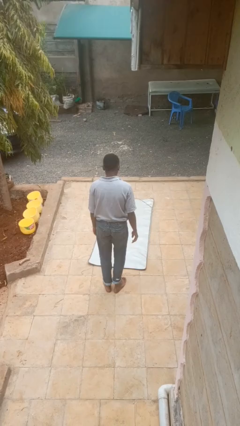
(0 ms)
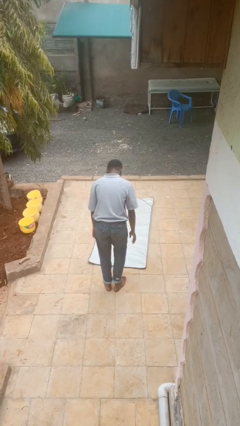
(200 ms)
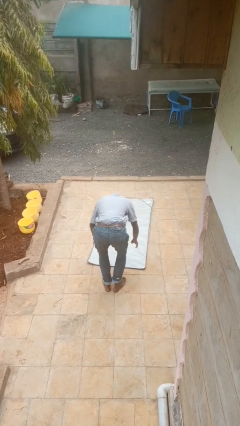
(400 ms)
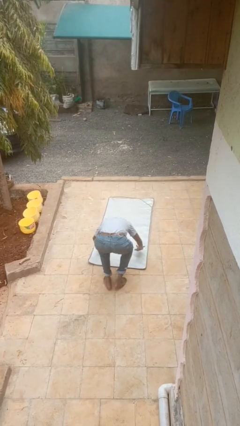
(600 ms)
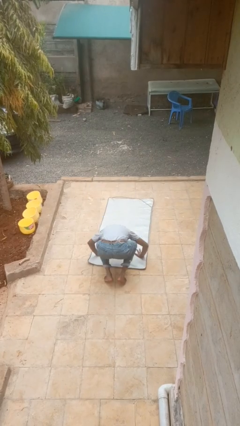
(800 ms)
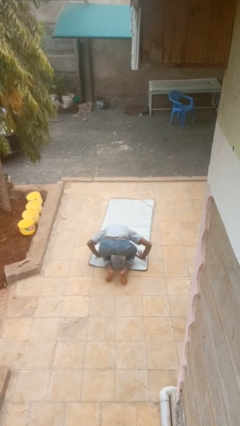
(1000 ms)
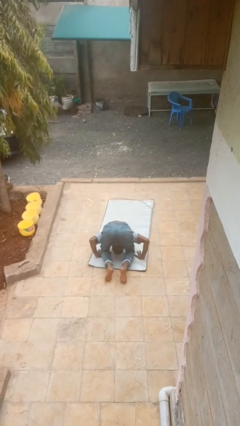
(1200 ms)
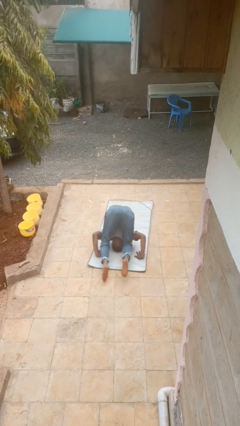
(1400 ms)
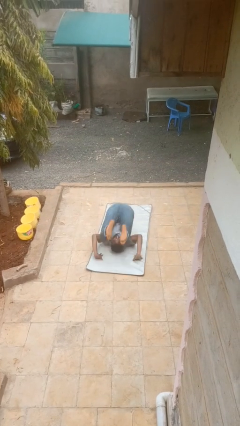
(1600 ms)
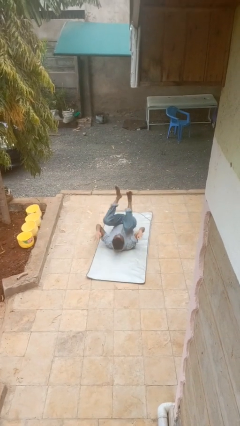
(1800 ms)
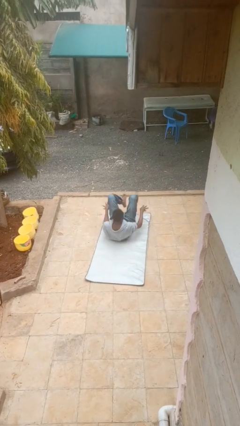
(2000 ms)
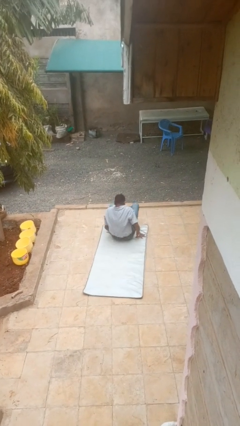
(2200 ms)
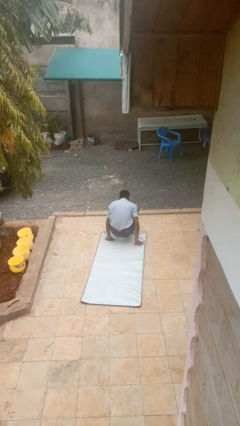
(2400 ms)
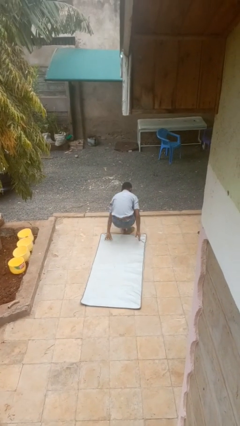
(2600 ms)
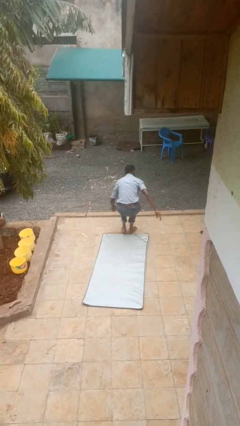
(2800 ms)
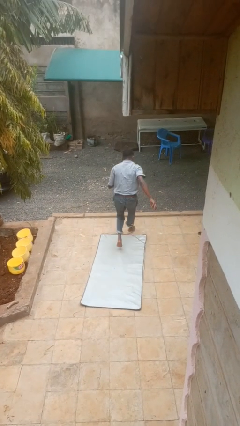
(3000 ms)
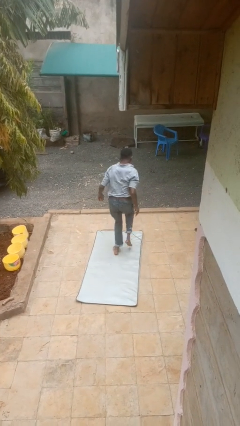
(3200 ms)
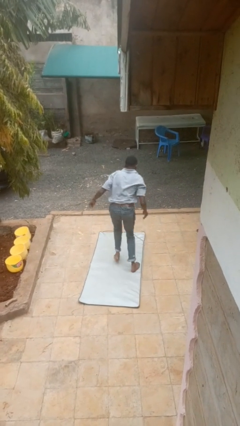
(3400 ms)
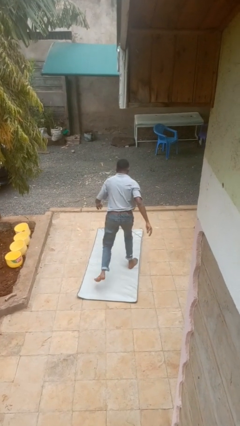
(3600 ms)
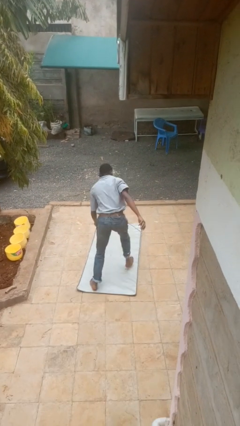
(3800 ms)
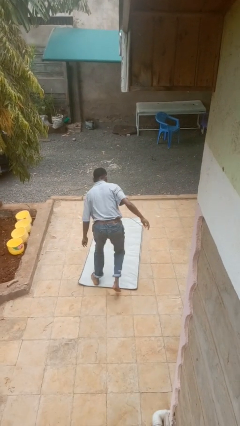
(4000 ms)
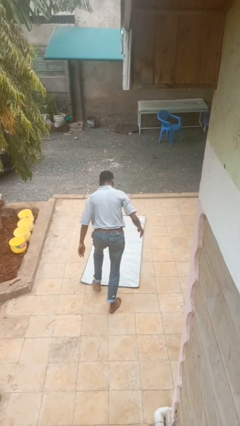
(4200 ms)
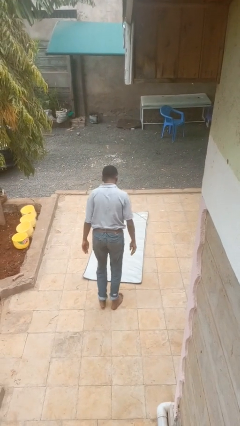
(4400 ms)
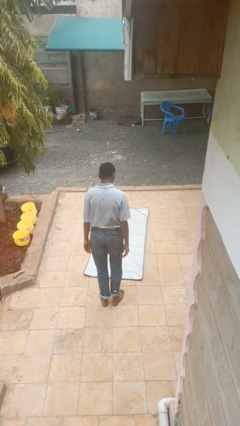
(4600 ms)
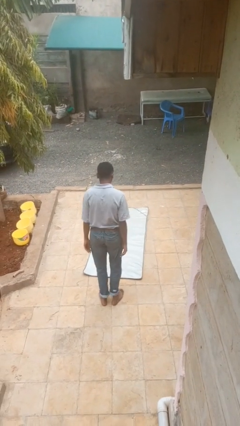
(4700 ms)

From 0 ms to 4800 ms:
person somersaults

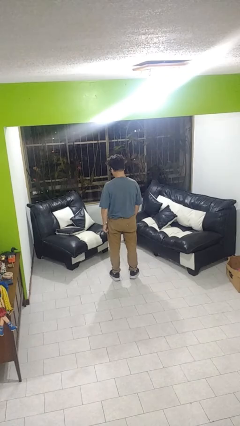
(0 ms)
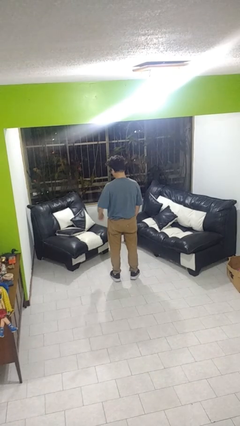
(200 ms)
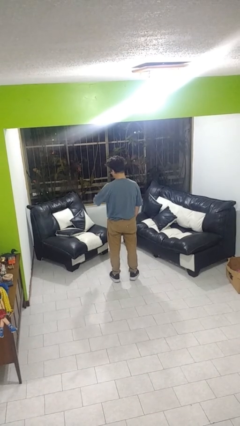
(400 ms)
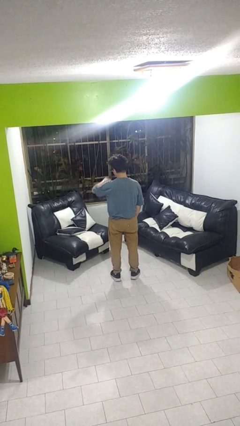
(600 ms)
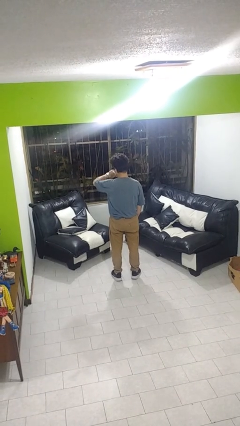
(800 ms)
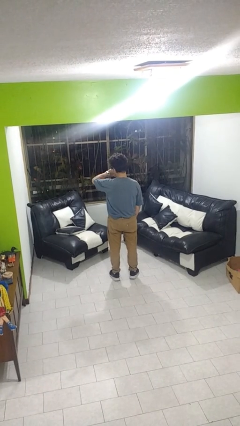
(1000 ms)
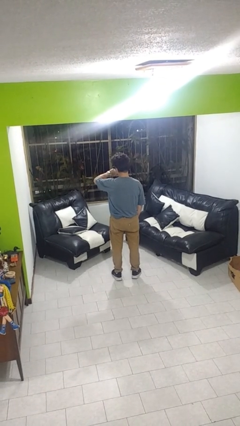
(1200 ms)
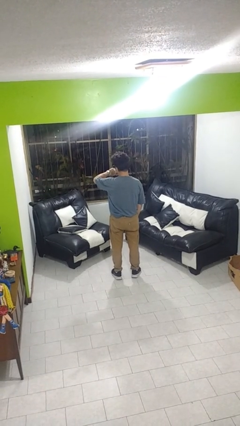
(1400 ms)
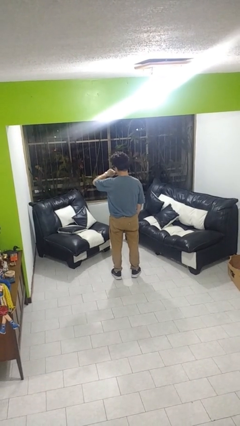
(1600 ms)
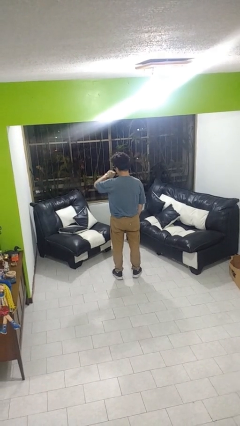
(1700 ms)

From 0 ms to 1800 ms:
person looks at wristwatch

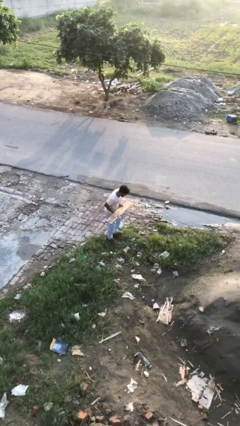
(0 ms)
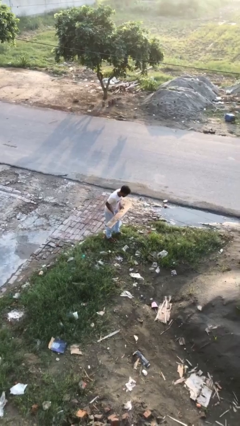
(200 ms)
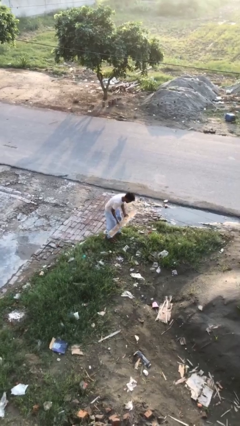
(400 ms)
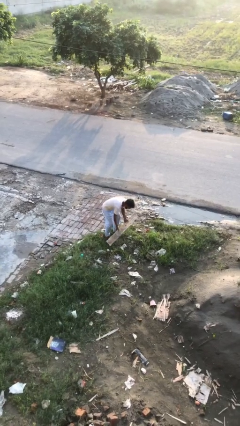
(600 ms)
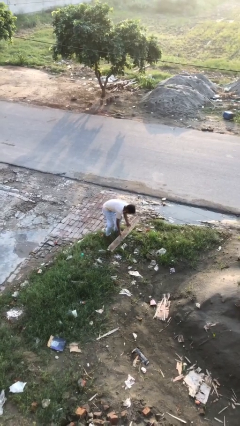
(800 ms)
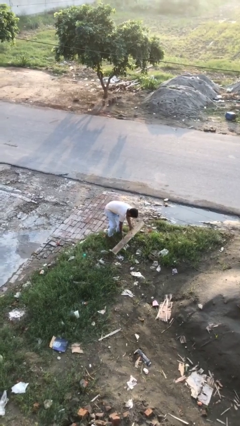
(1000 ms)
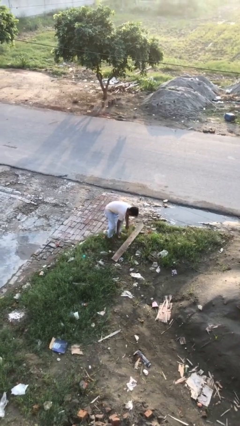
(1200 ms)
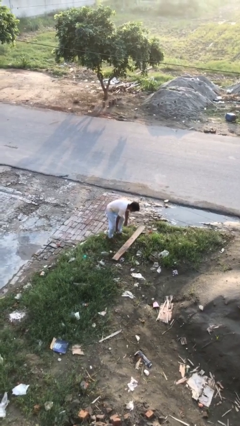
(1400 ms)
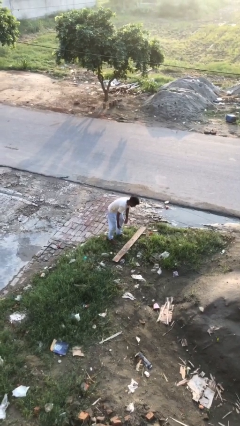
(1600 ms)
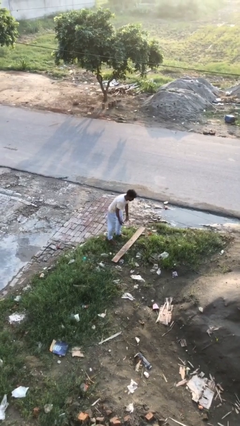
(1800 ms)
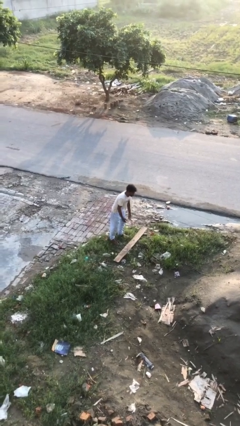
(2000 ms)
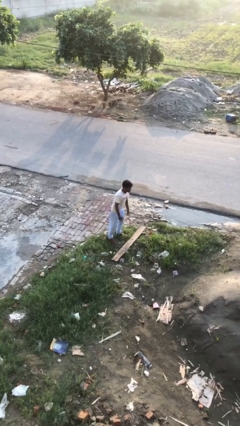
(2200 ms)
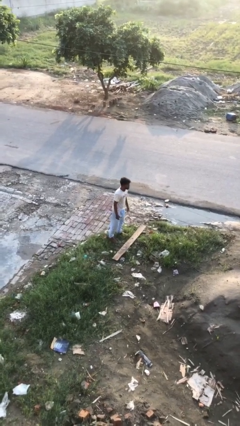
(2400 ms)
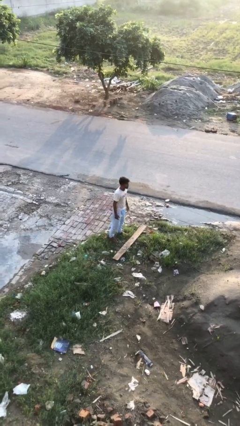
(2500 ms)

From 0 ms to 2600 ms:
person puts down object on floor

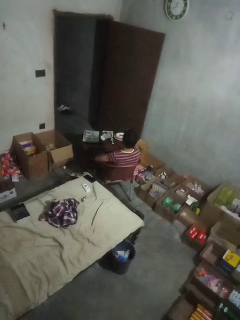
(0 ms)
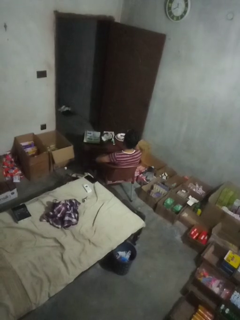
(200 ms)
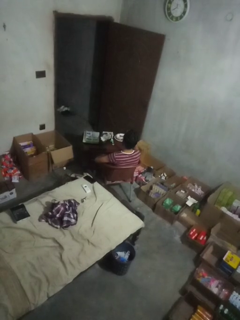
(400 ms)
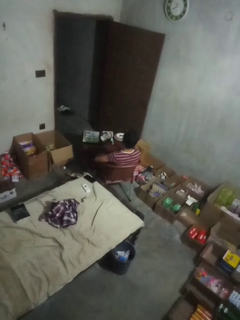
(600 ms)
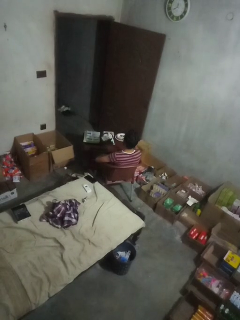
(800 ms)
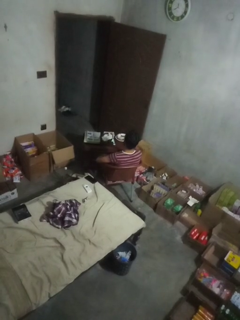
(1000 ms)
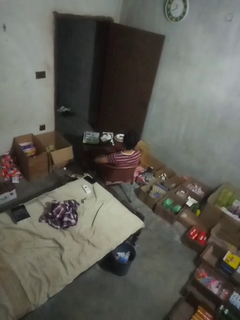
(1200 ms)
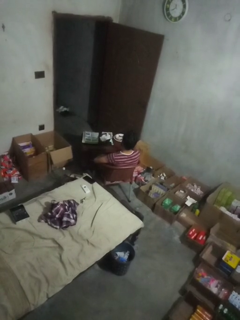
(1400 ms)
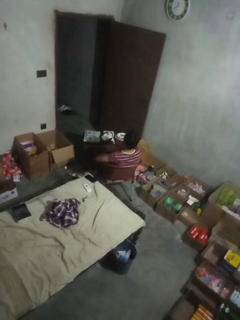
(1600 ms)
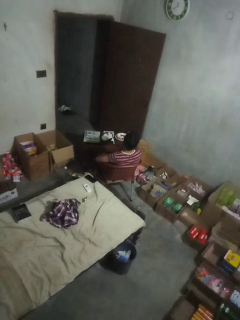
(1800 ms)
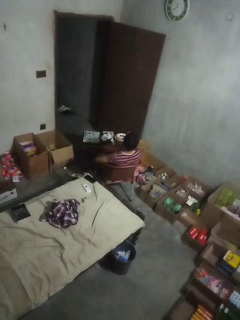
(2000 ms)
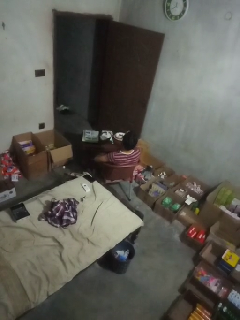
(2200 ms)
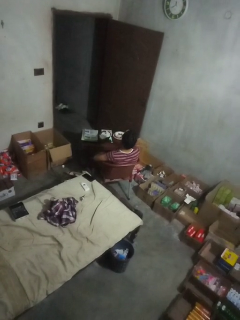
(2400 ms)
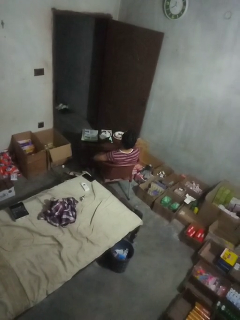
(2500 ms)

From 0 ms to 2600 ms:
person drinks from shotglass

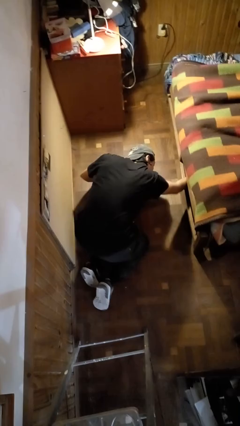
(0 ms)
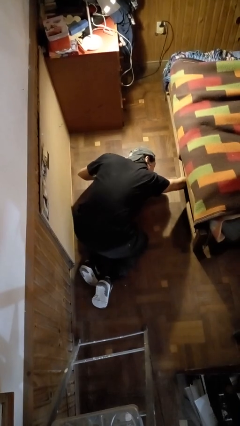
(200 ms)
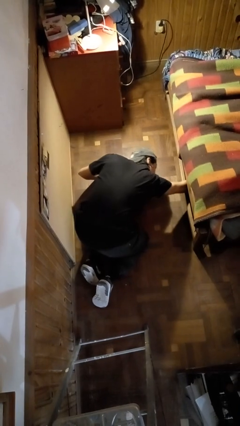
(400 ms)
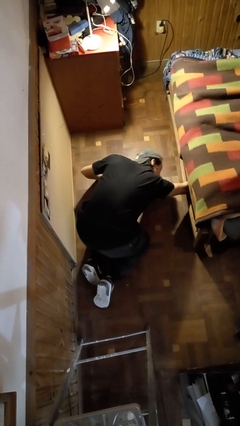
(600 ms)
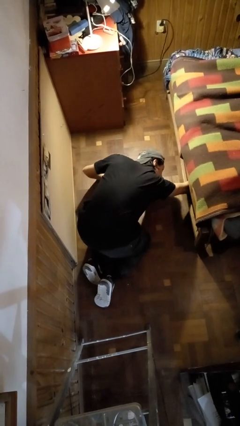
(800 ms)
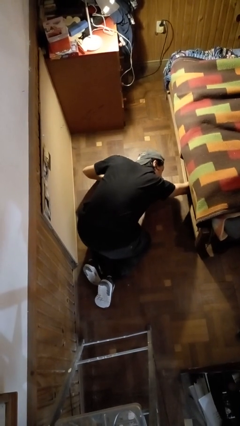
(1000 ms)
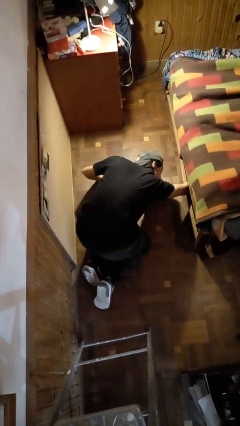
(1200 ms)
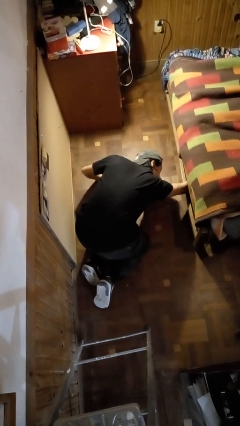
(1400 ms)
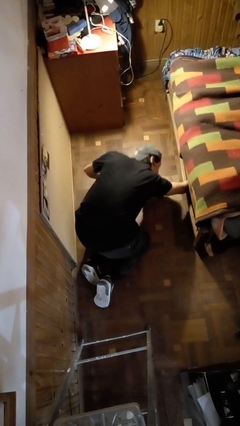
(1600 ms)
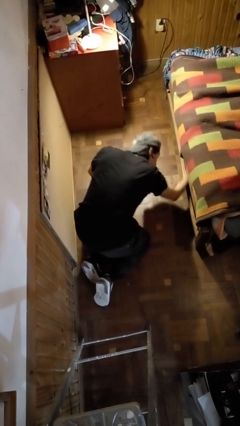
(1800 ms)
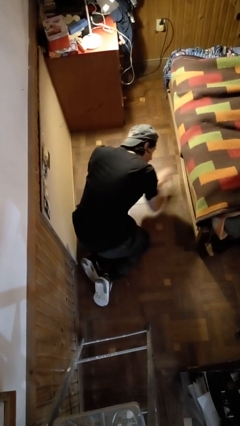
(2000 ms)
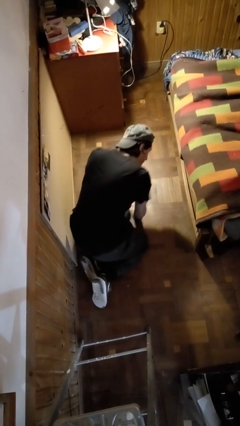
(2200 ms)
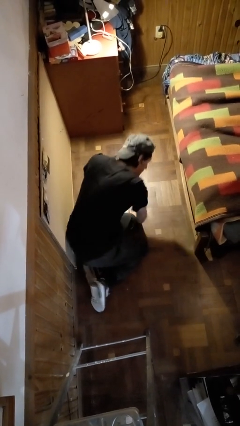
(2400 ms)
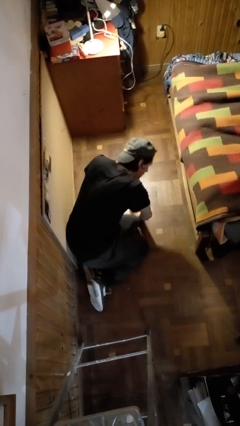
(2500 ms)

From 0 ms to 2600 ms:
person searches under bed

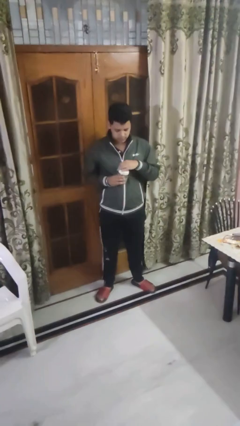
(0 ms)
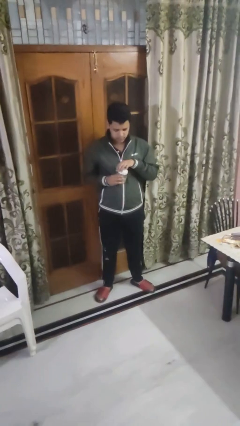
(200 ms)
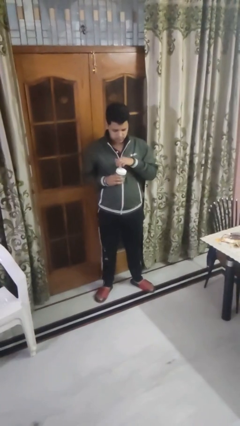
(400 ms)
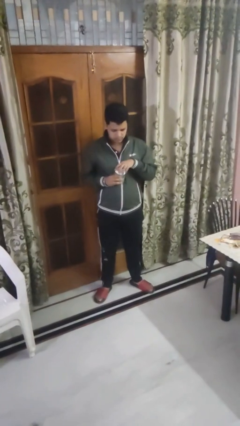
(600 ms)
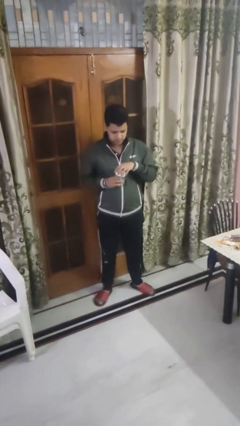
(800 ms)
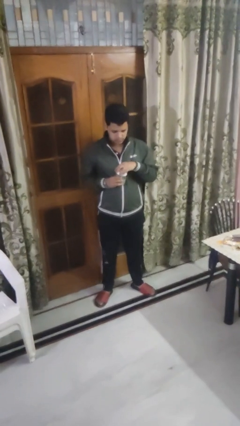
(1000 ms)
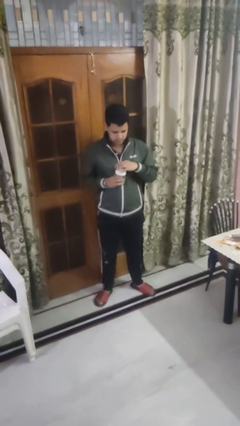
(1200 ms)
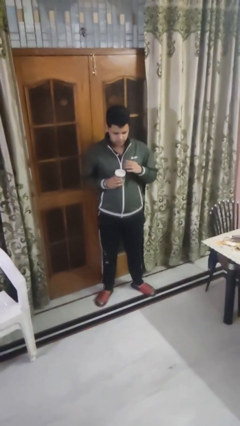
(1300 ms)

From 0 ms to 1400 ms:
person closes jar

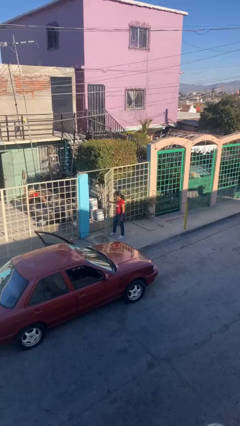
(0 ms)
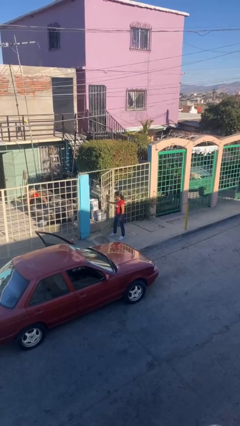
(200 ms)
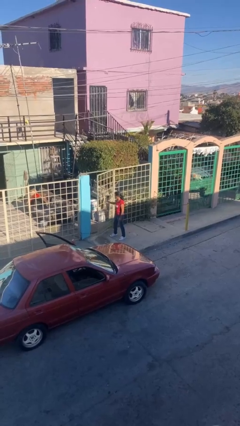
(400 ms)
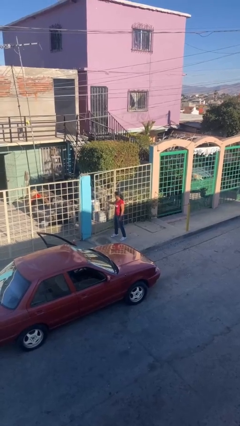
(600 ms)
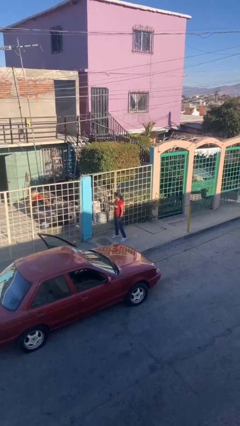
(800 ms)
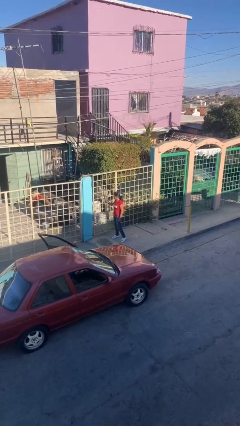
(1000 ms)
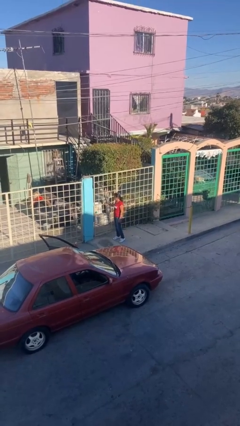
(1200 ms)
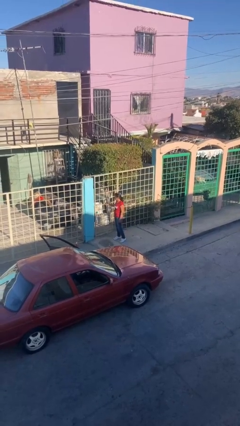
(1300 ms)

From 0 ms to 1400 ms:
person closes facility door

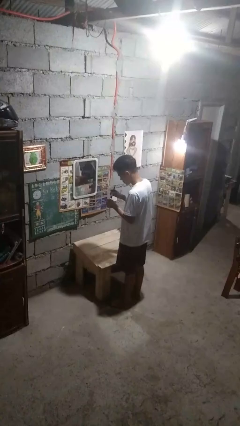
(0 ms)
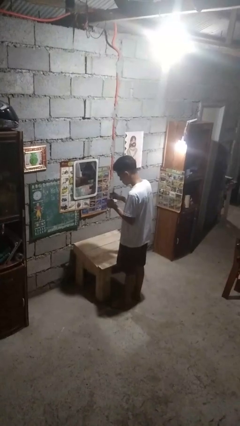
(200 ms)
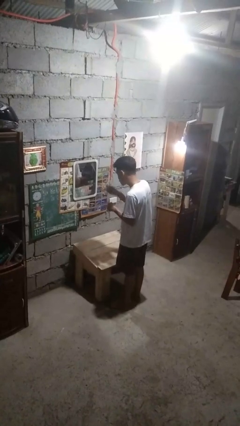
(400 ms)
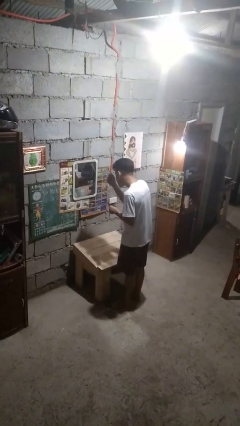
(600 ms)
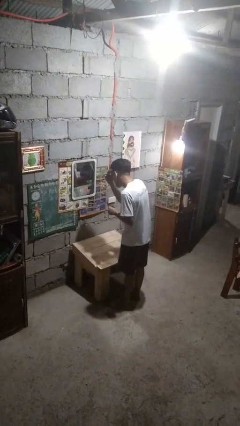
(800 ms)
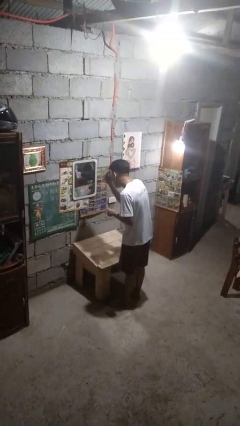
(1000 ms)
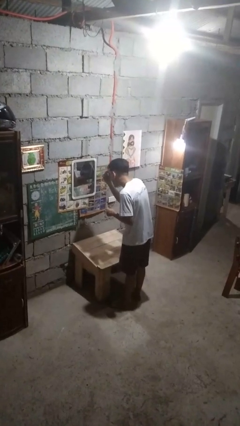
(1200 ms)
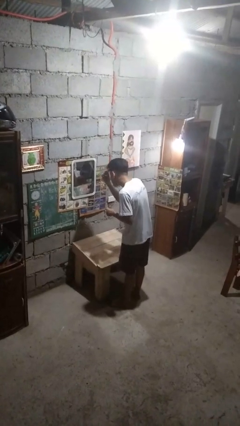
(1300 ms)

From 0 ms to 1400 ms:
person applies foundation makeup
